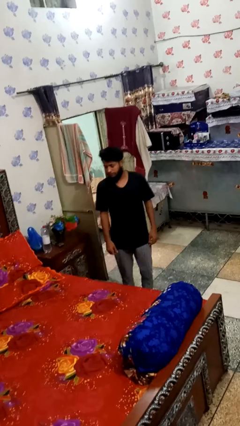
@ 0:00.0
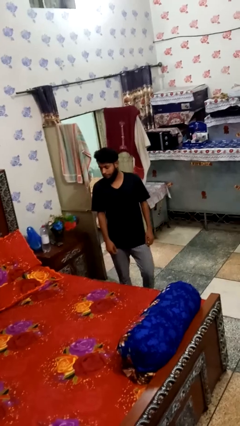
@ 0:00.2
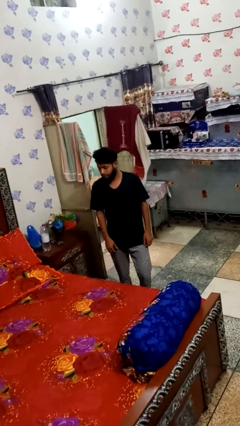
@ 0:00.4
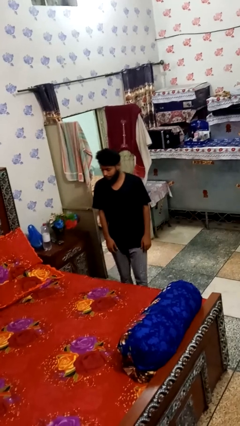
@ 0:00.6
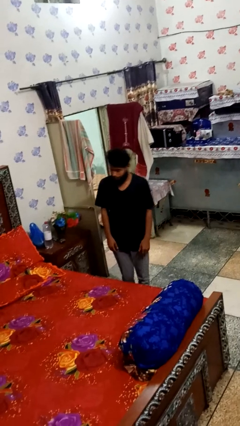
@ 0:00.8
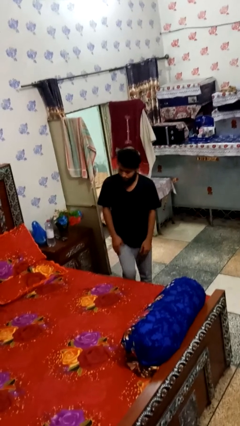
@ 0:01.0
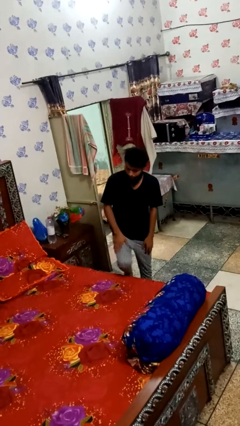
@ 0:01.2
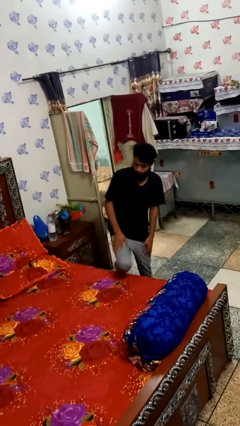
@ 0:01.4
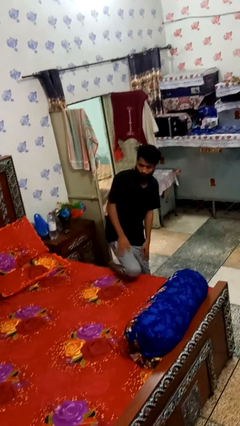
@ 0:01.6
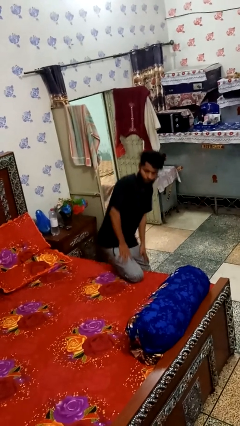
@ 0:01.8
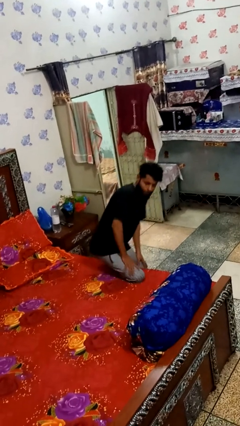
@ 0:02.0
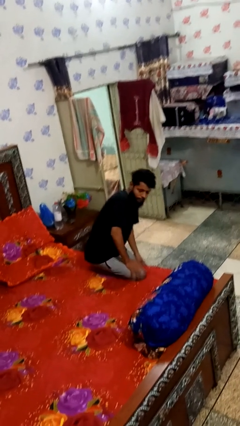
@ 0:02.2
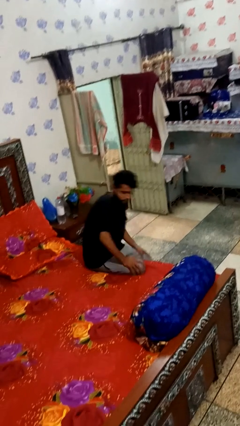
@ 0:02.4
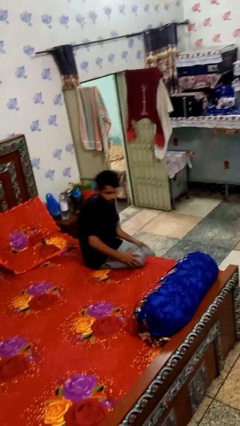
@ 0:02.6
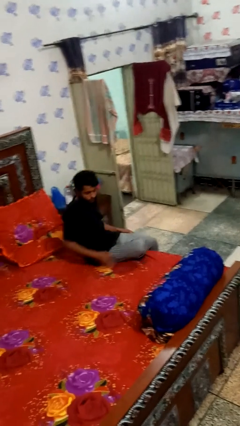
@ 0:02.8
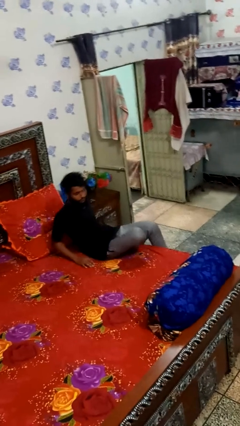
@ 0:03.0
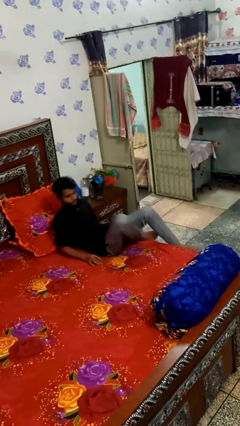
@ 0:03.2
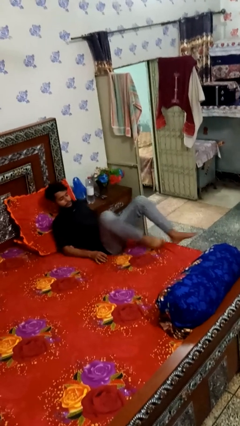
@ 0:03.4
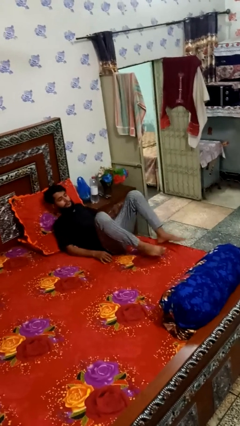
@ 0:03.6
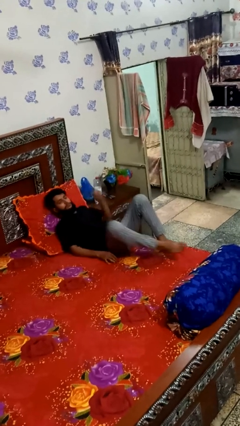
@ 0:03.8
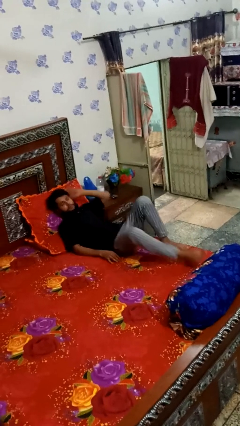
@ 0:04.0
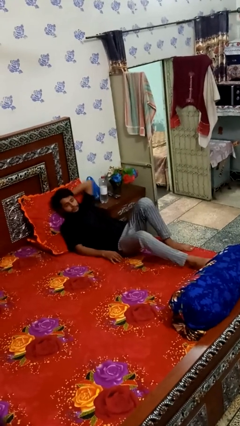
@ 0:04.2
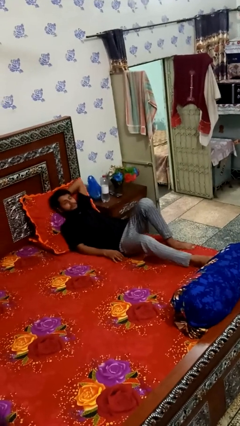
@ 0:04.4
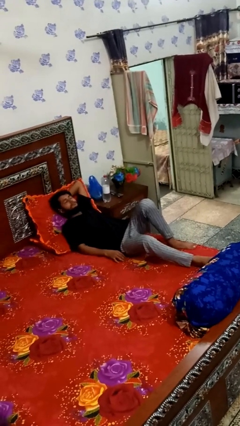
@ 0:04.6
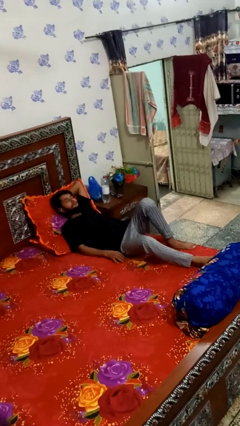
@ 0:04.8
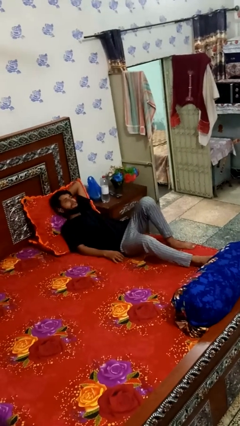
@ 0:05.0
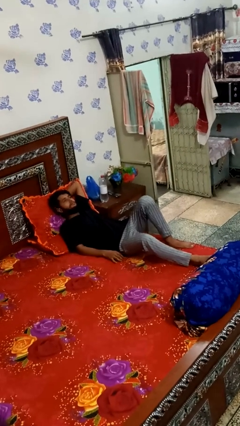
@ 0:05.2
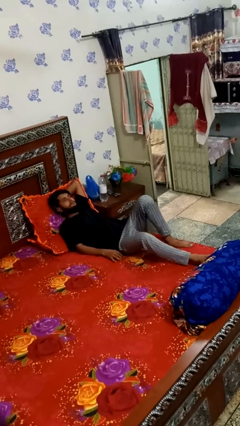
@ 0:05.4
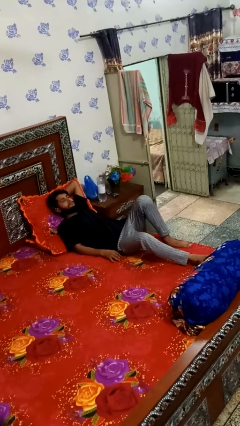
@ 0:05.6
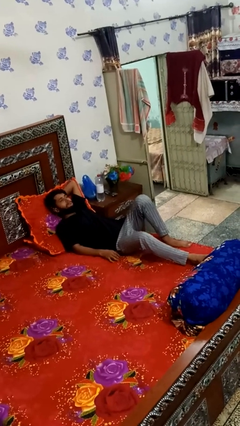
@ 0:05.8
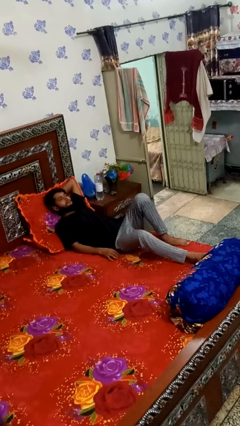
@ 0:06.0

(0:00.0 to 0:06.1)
person lies down on bed

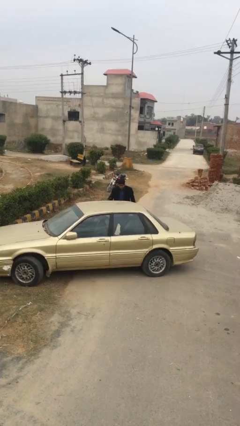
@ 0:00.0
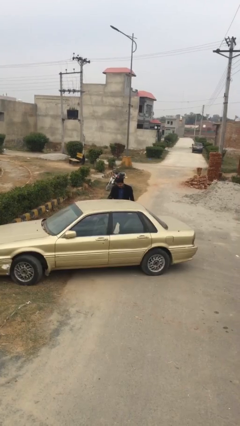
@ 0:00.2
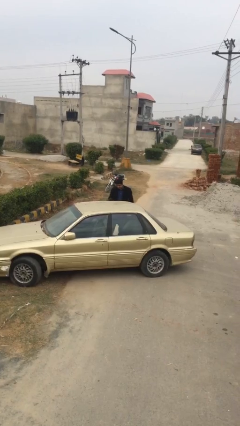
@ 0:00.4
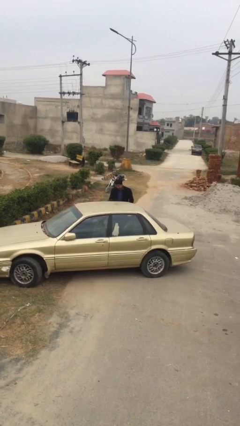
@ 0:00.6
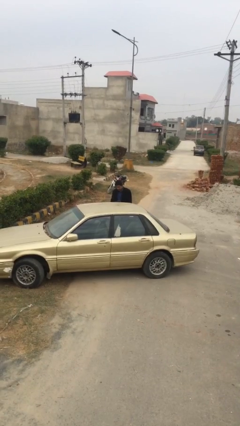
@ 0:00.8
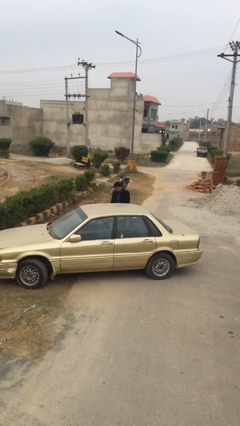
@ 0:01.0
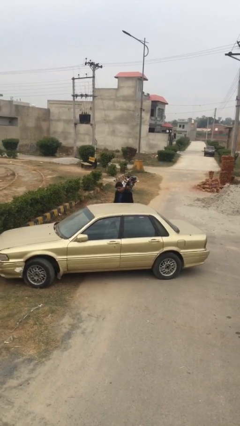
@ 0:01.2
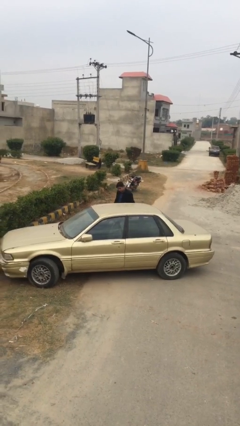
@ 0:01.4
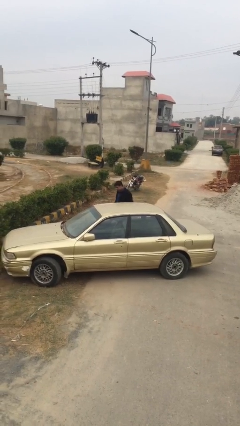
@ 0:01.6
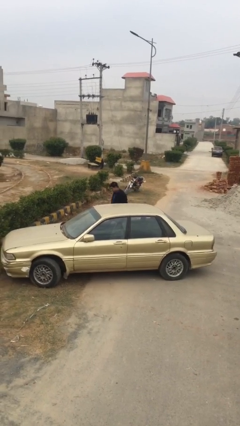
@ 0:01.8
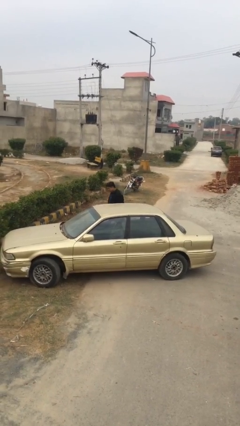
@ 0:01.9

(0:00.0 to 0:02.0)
person closes car door

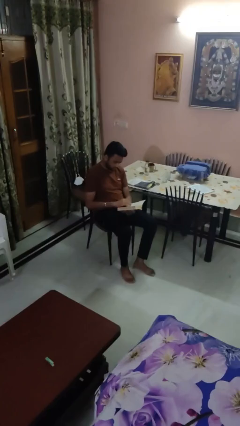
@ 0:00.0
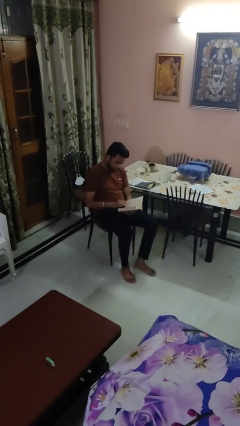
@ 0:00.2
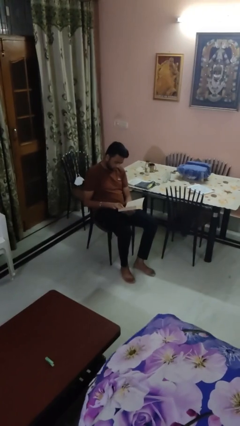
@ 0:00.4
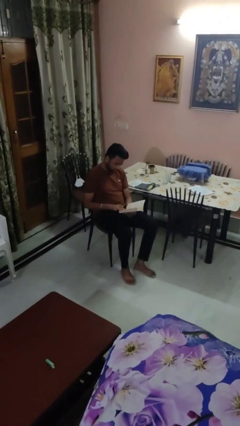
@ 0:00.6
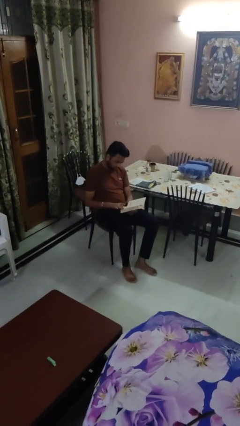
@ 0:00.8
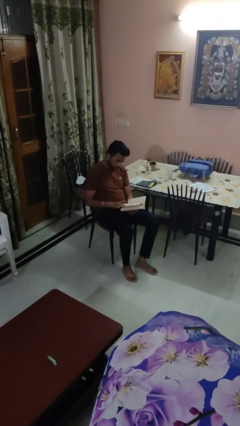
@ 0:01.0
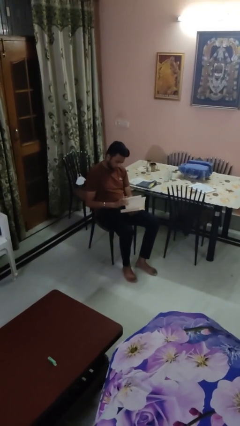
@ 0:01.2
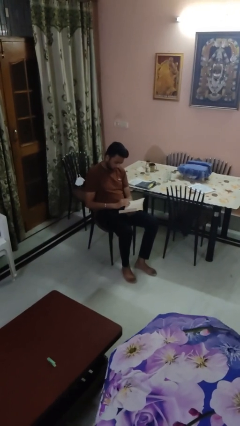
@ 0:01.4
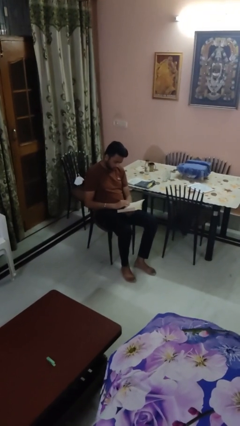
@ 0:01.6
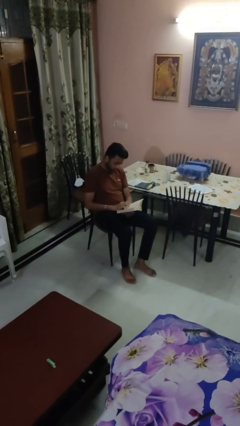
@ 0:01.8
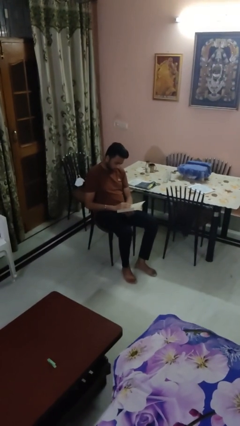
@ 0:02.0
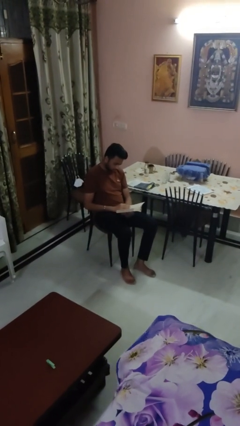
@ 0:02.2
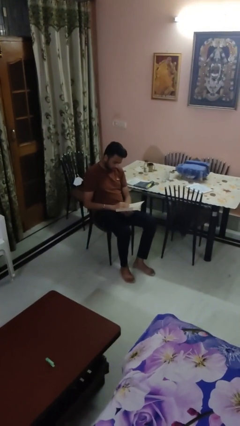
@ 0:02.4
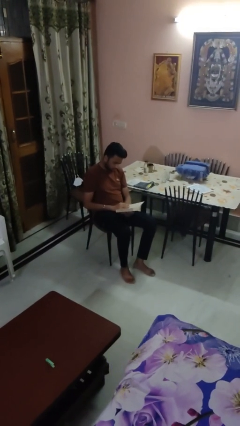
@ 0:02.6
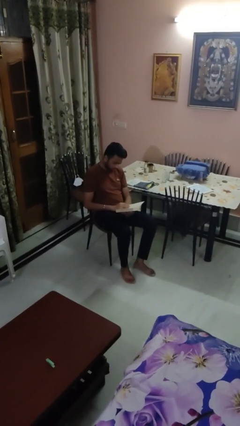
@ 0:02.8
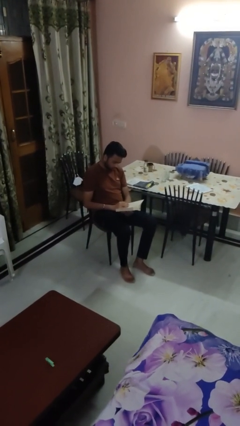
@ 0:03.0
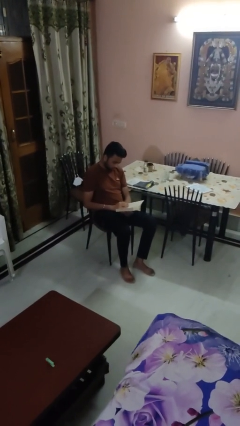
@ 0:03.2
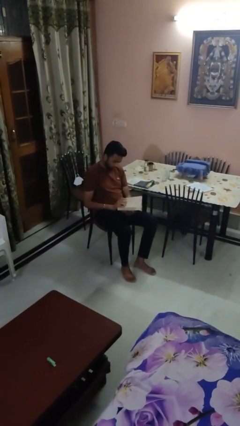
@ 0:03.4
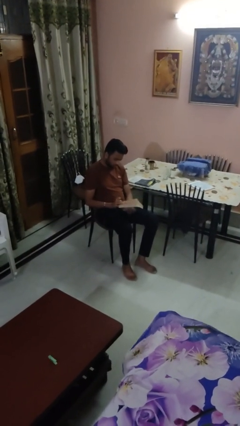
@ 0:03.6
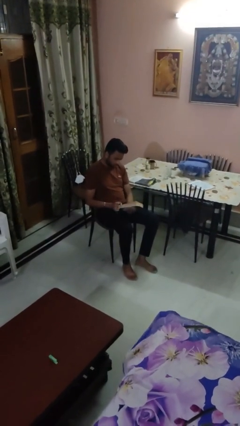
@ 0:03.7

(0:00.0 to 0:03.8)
person reads book

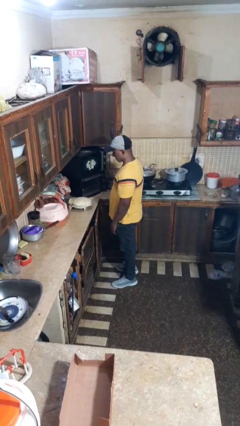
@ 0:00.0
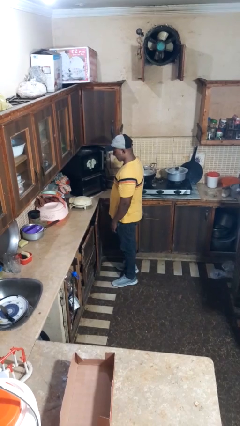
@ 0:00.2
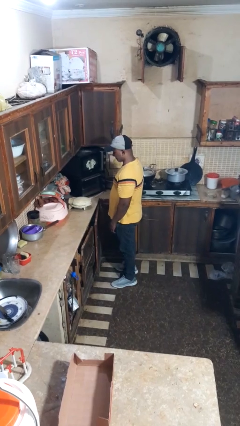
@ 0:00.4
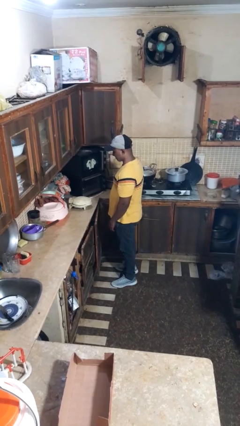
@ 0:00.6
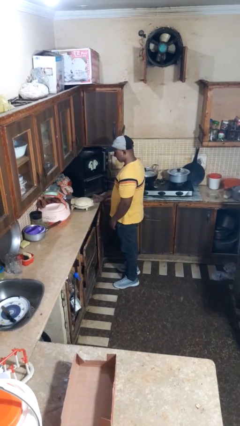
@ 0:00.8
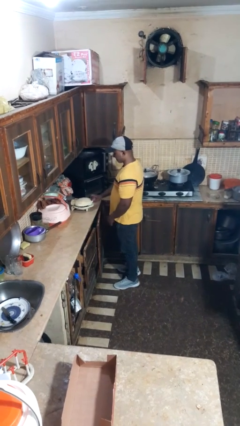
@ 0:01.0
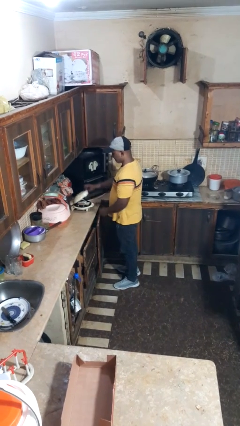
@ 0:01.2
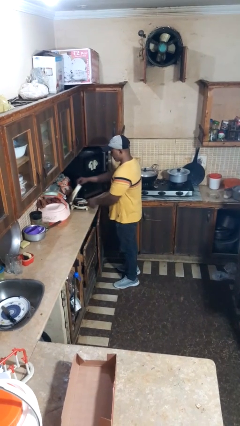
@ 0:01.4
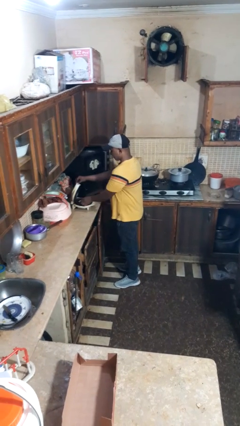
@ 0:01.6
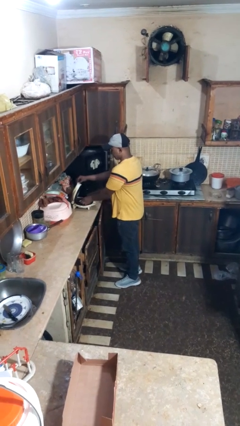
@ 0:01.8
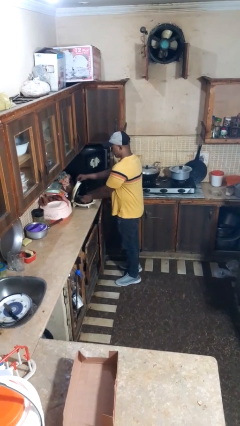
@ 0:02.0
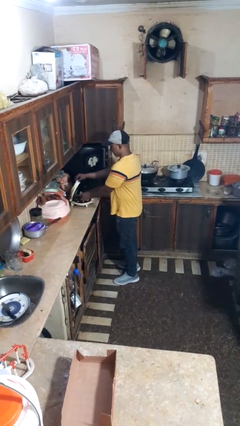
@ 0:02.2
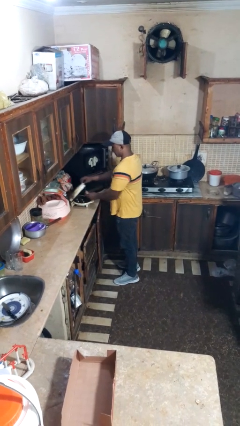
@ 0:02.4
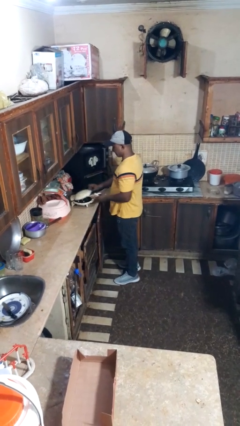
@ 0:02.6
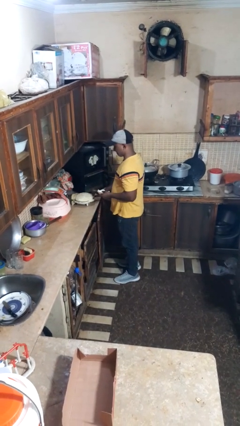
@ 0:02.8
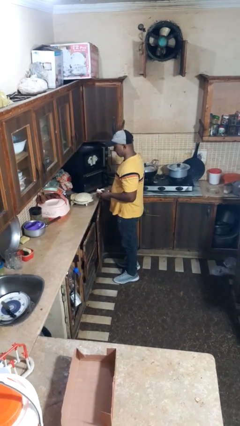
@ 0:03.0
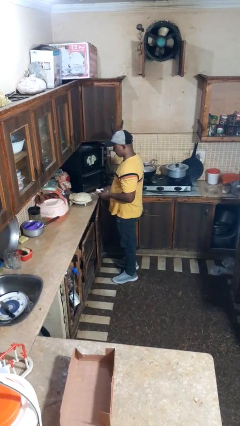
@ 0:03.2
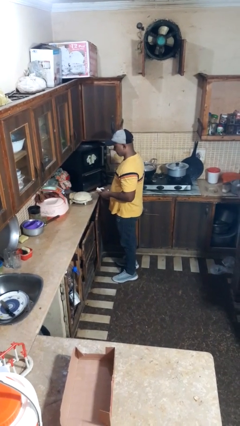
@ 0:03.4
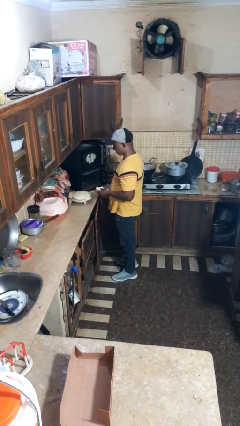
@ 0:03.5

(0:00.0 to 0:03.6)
person takes object from toaster

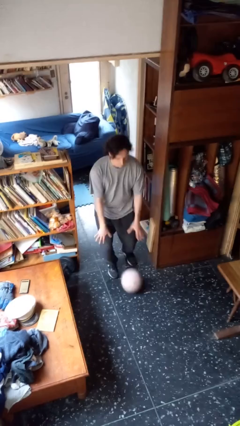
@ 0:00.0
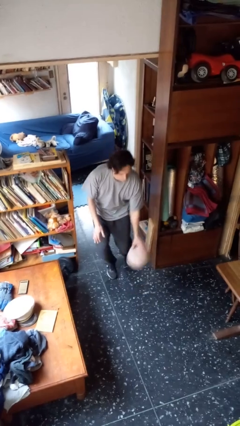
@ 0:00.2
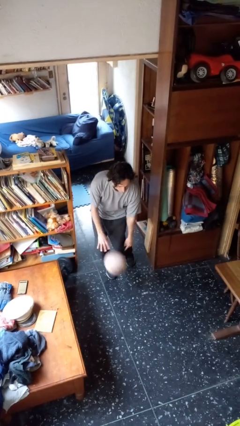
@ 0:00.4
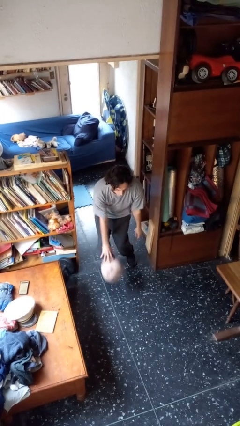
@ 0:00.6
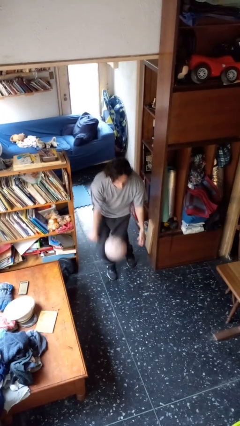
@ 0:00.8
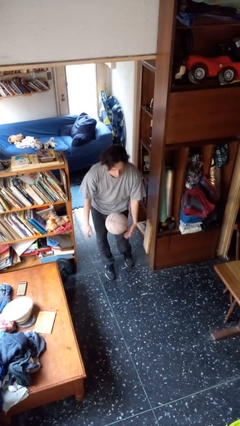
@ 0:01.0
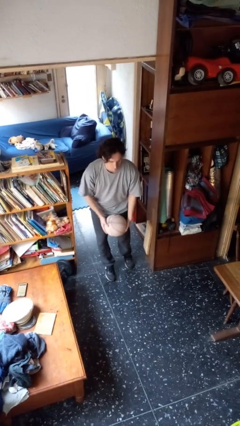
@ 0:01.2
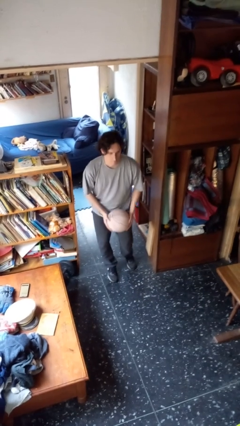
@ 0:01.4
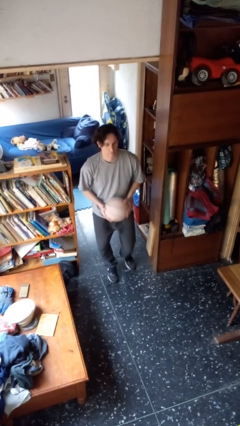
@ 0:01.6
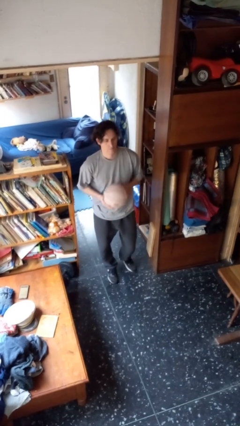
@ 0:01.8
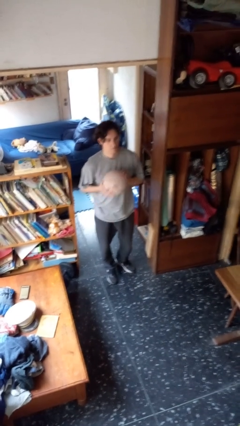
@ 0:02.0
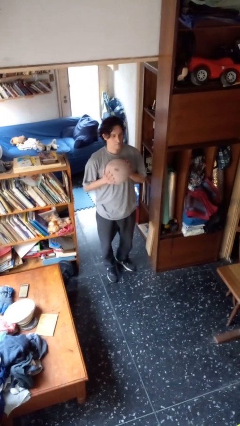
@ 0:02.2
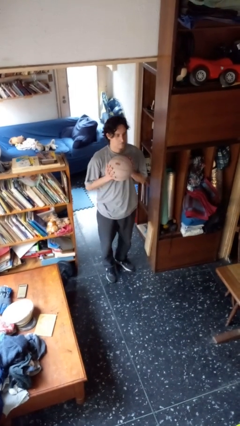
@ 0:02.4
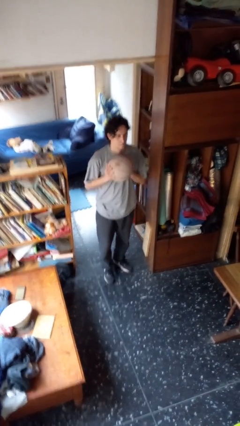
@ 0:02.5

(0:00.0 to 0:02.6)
person bounces ball on floor
